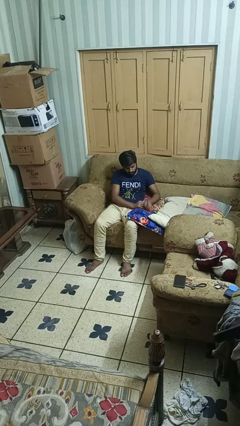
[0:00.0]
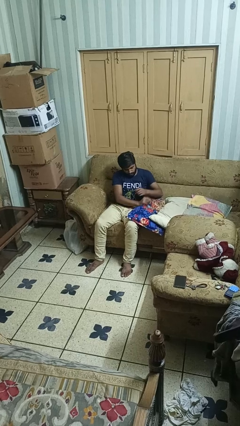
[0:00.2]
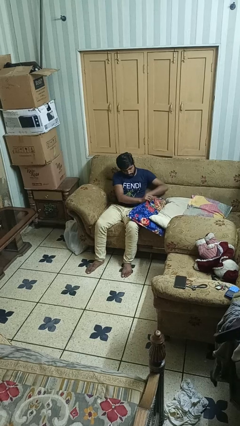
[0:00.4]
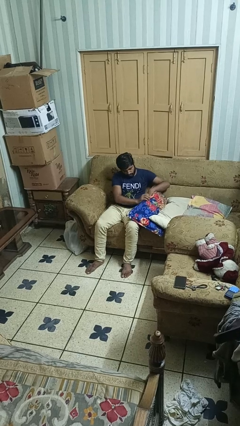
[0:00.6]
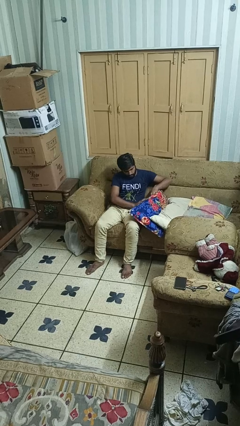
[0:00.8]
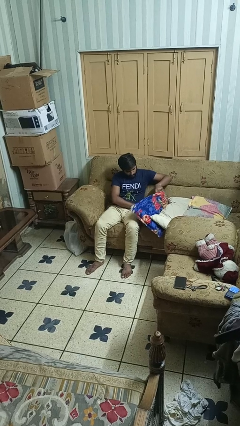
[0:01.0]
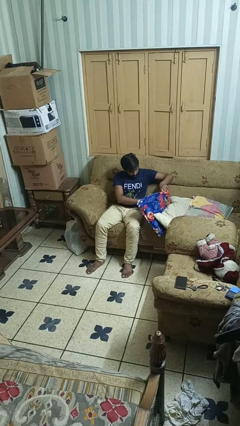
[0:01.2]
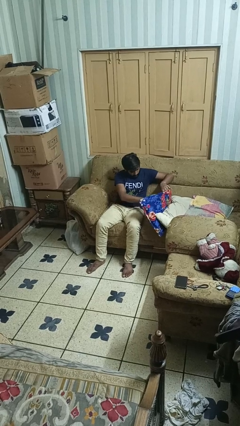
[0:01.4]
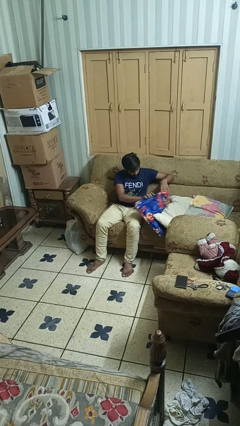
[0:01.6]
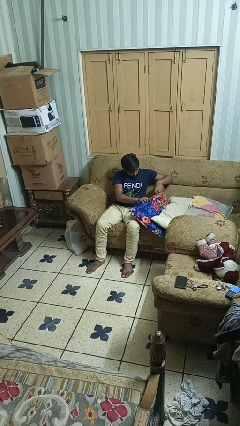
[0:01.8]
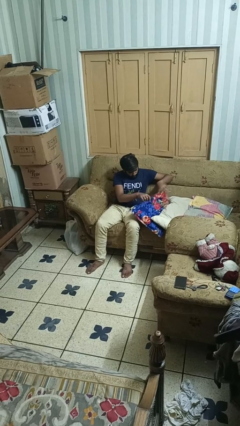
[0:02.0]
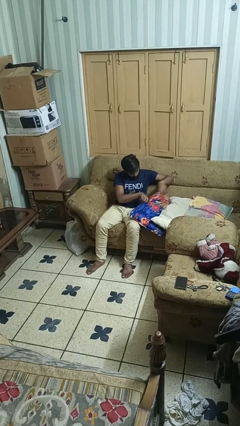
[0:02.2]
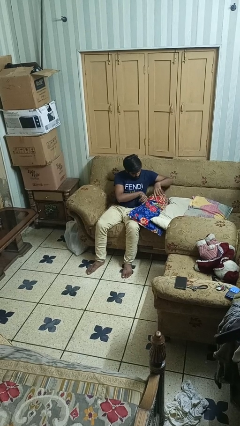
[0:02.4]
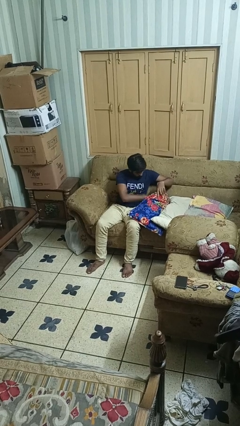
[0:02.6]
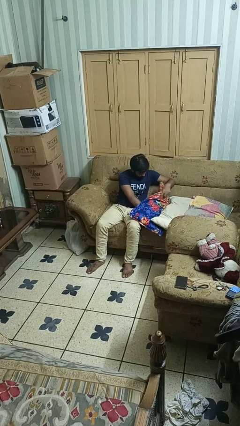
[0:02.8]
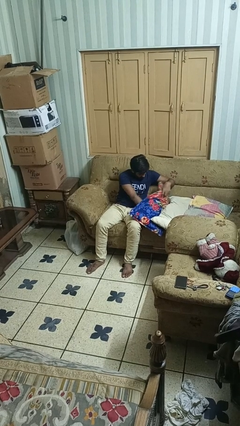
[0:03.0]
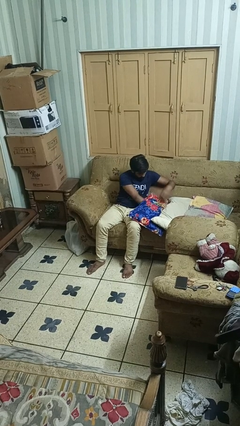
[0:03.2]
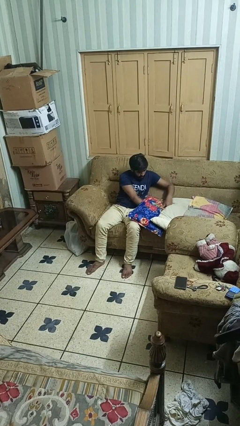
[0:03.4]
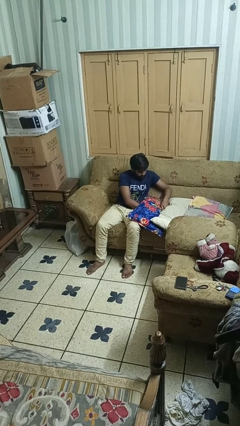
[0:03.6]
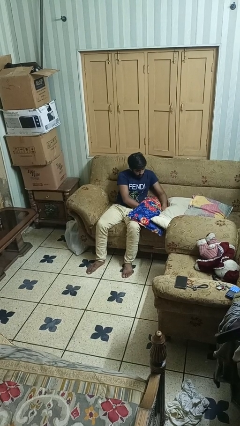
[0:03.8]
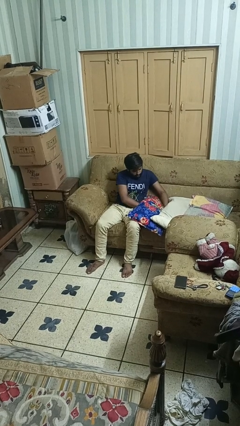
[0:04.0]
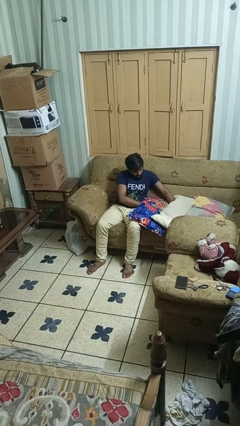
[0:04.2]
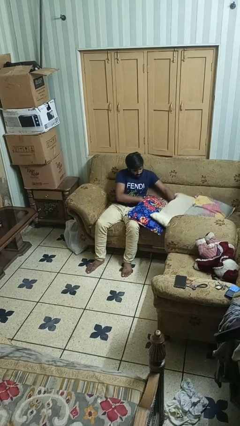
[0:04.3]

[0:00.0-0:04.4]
person searches in couch

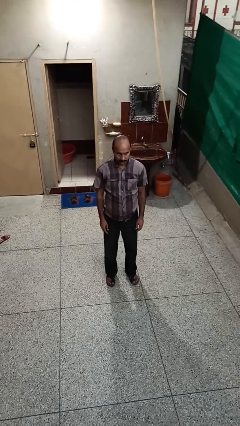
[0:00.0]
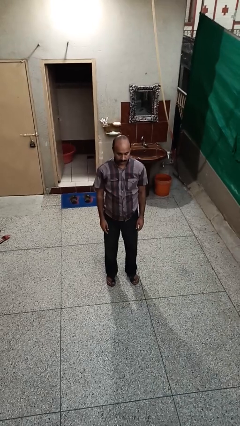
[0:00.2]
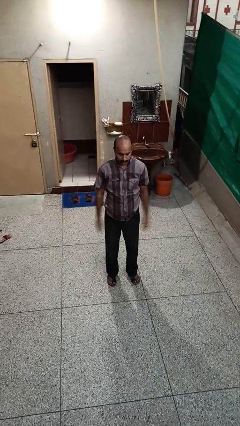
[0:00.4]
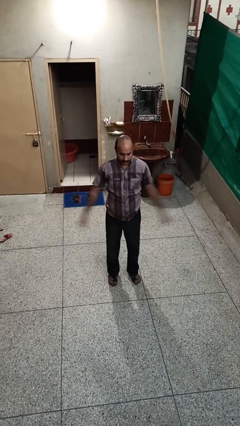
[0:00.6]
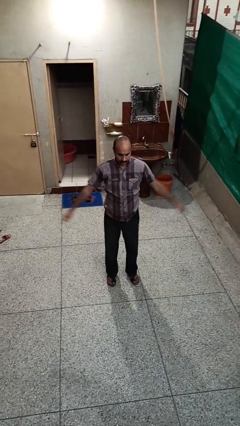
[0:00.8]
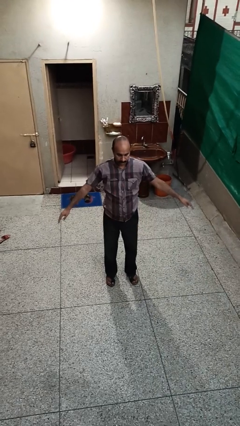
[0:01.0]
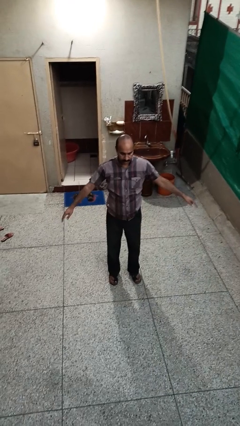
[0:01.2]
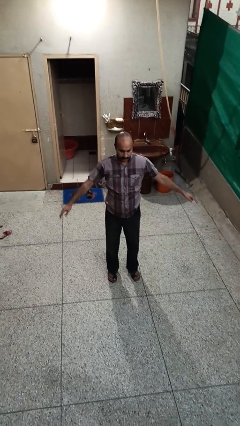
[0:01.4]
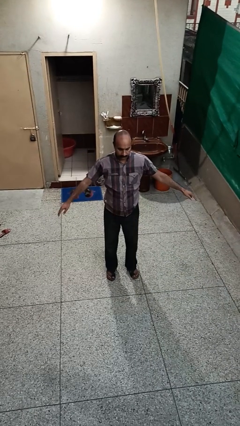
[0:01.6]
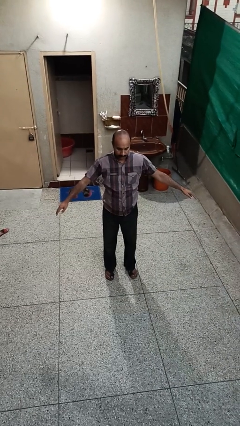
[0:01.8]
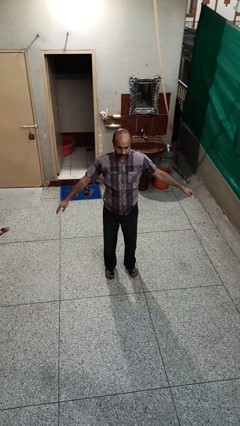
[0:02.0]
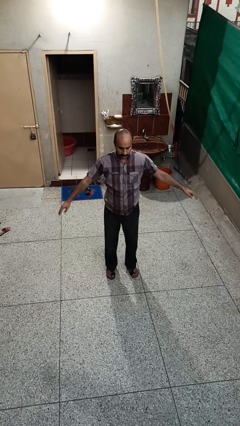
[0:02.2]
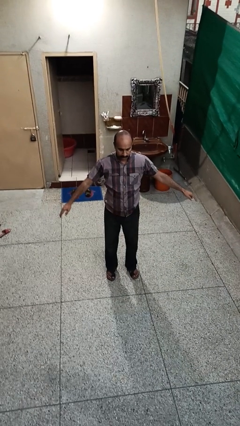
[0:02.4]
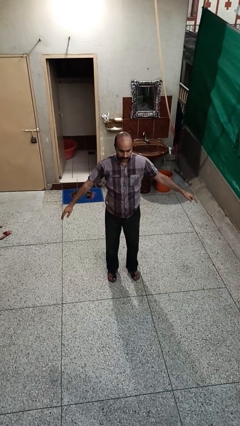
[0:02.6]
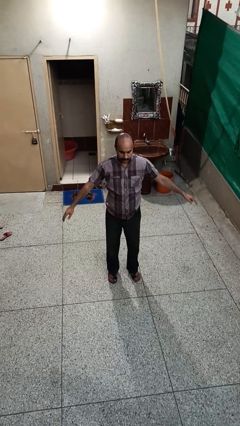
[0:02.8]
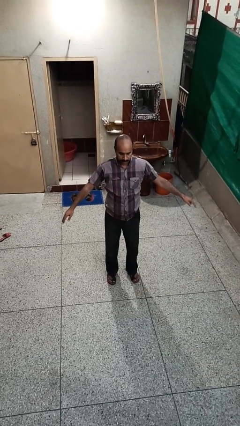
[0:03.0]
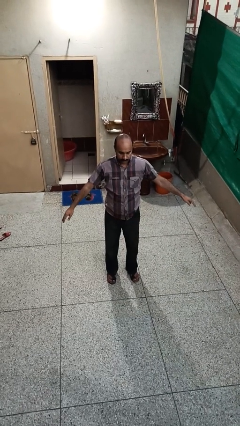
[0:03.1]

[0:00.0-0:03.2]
person stretches arms to side

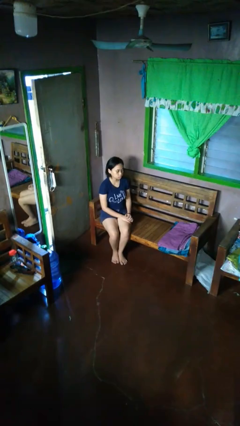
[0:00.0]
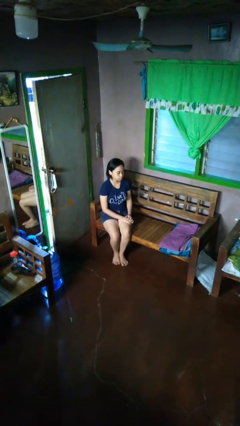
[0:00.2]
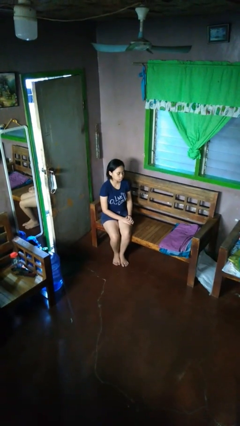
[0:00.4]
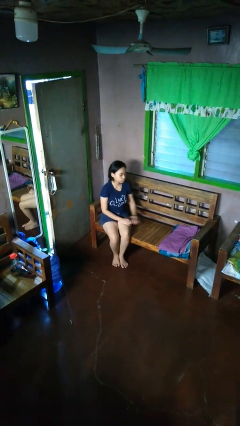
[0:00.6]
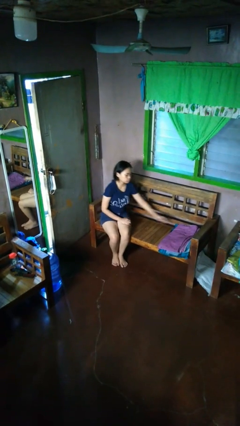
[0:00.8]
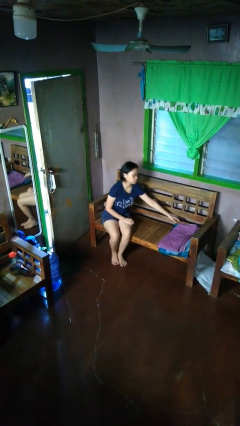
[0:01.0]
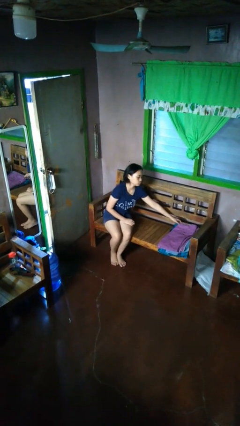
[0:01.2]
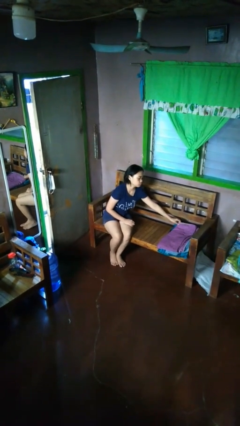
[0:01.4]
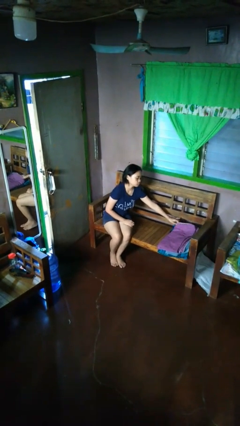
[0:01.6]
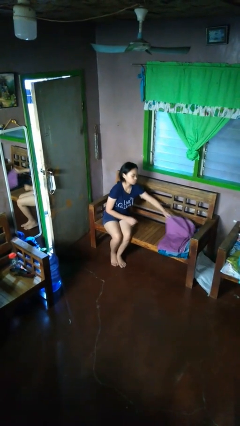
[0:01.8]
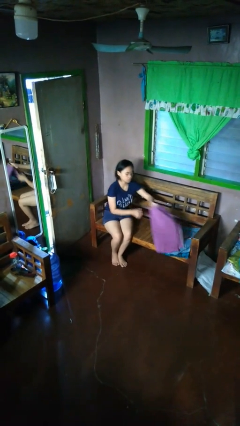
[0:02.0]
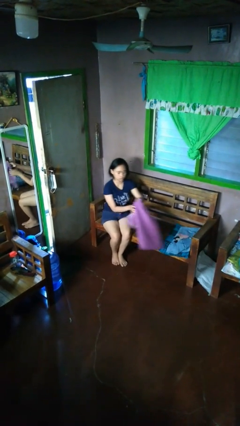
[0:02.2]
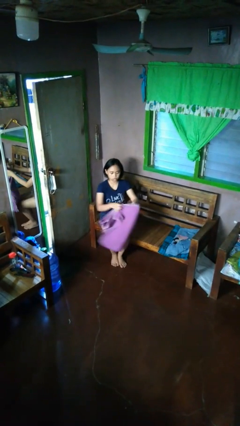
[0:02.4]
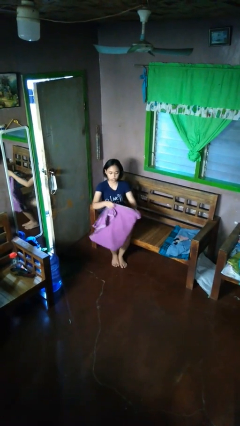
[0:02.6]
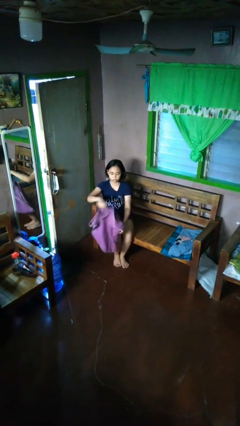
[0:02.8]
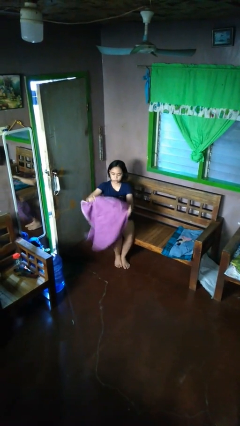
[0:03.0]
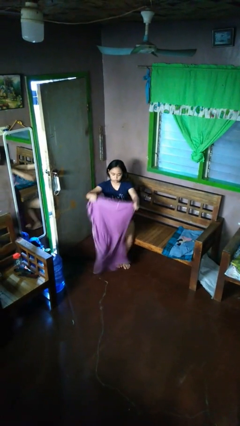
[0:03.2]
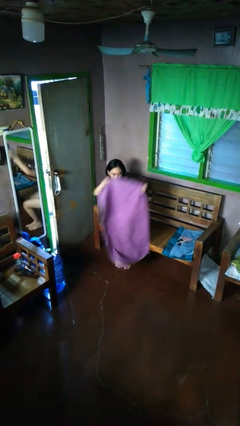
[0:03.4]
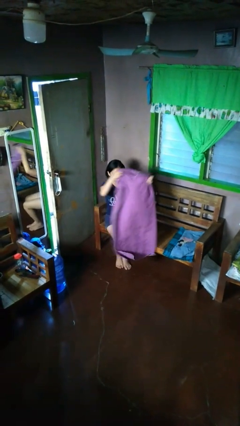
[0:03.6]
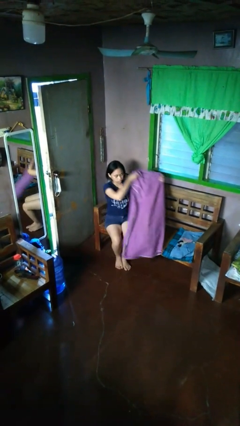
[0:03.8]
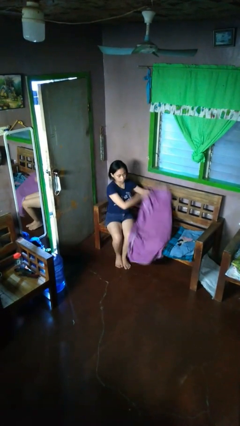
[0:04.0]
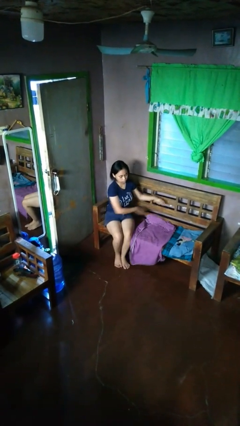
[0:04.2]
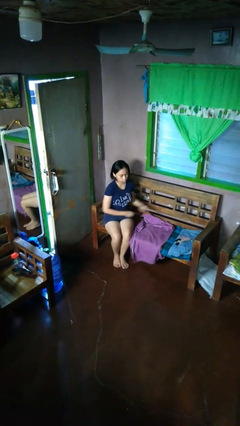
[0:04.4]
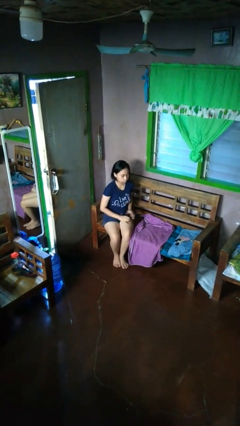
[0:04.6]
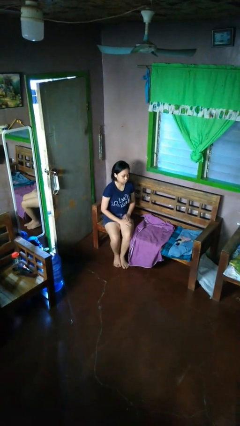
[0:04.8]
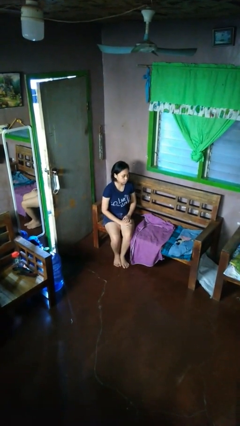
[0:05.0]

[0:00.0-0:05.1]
person unfolds blanket

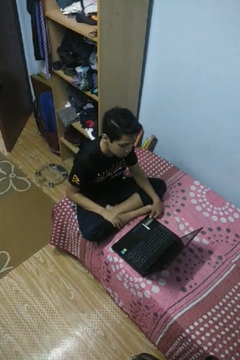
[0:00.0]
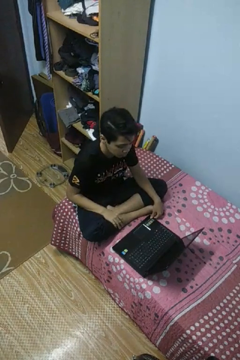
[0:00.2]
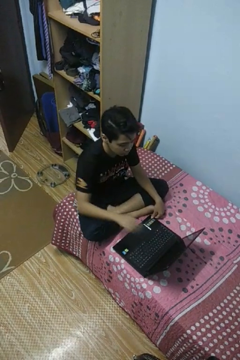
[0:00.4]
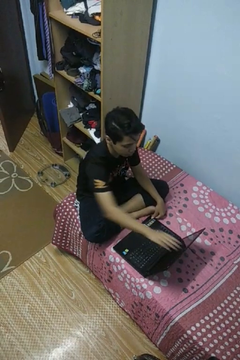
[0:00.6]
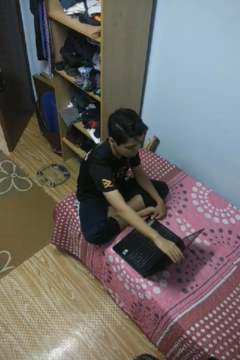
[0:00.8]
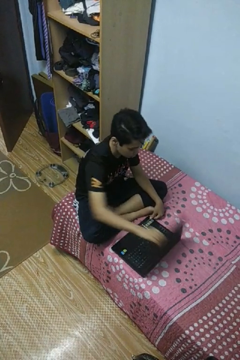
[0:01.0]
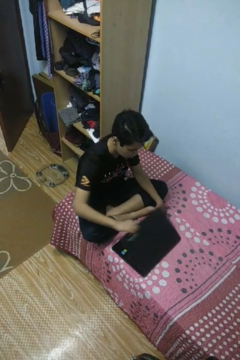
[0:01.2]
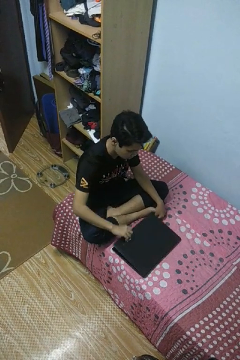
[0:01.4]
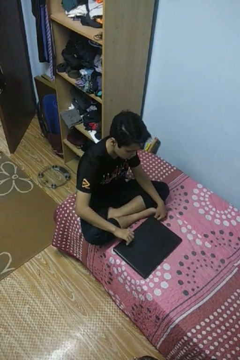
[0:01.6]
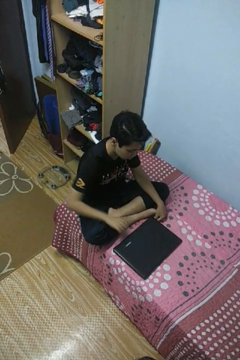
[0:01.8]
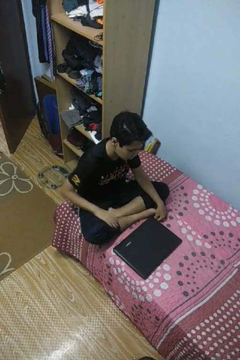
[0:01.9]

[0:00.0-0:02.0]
person closes laptop

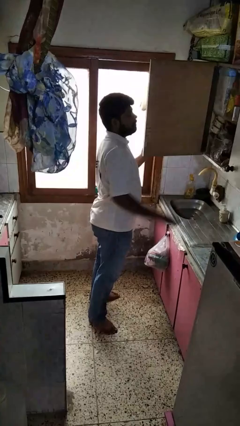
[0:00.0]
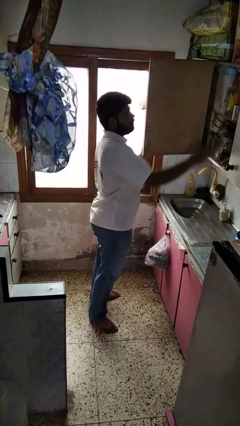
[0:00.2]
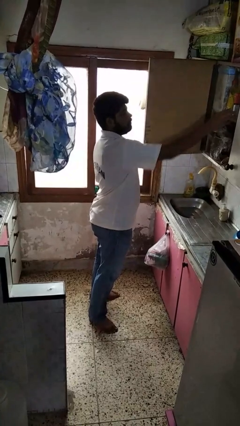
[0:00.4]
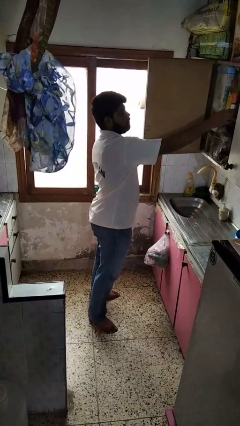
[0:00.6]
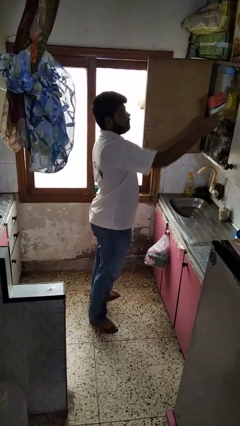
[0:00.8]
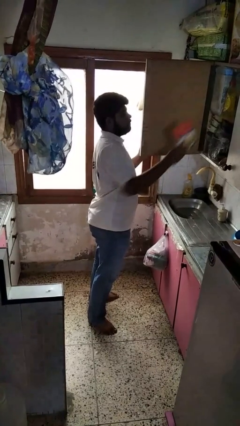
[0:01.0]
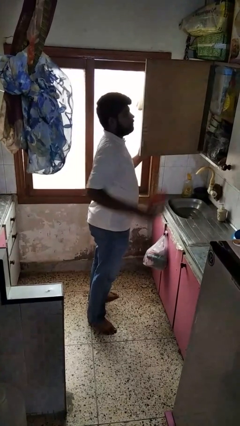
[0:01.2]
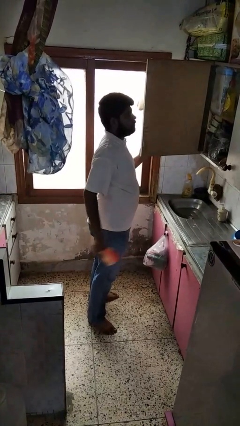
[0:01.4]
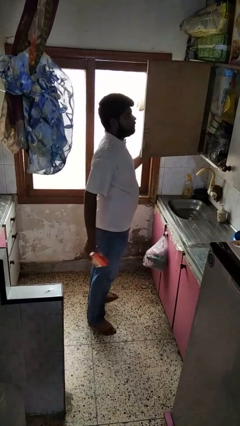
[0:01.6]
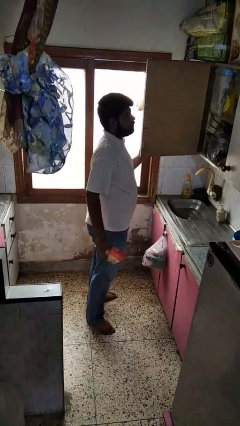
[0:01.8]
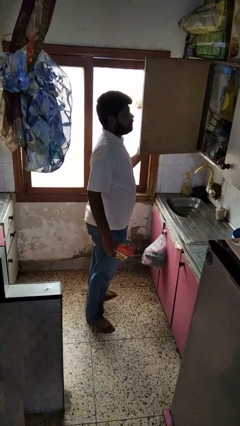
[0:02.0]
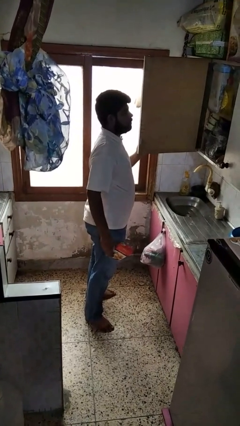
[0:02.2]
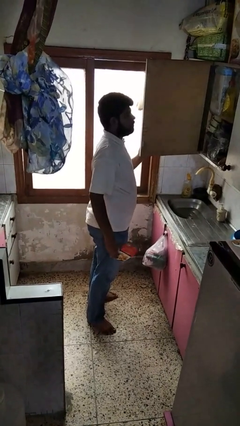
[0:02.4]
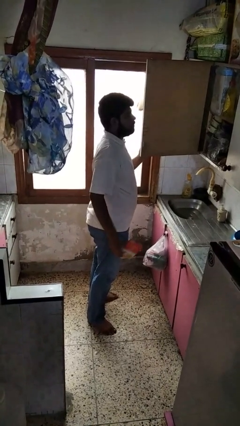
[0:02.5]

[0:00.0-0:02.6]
person picks up object from cabinet

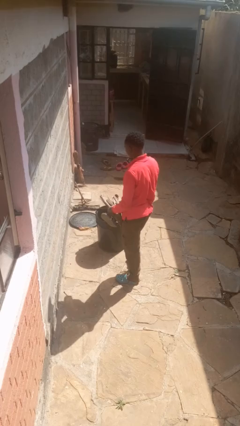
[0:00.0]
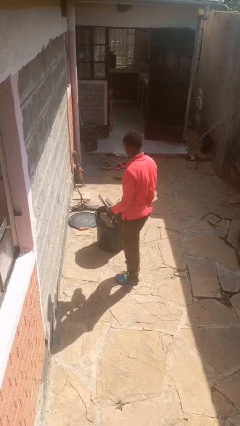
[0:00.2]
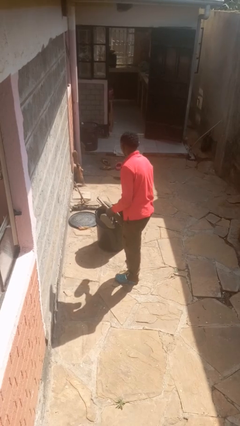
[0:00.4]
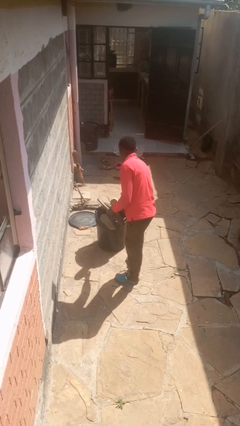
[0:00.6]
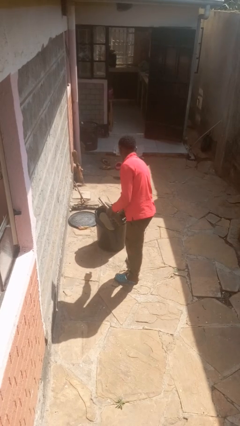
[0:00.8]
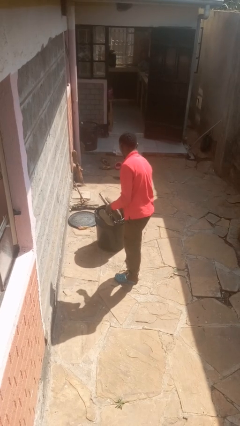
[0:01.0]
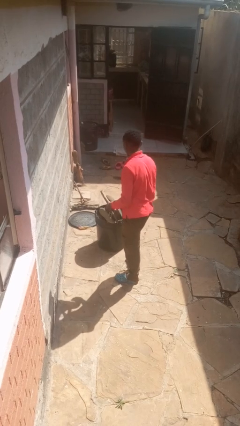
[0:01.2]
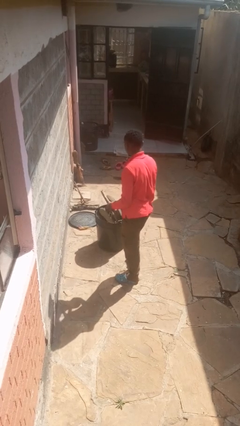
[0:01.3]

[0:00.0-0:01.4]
person discards trash
